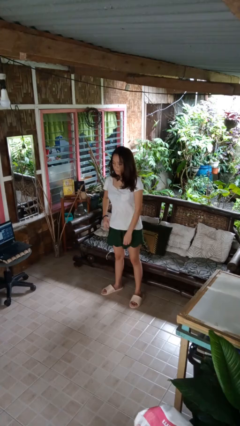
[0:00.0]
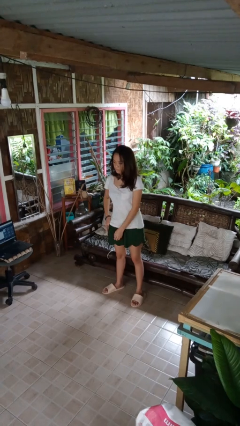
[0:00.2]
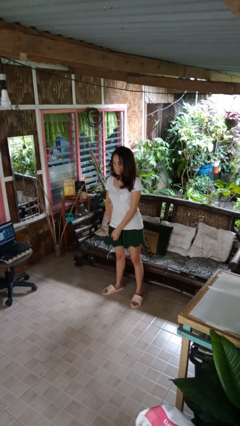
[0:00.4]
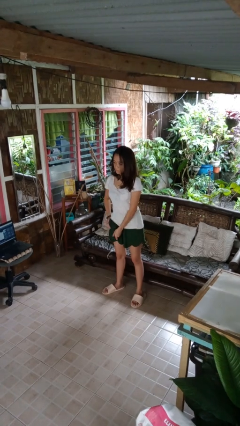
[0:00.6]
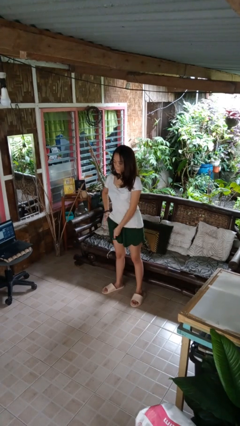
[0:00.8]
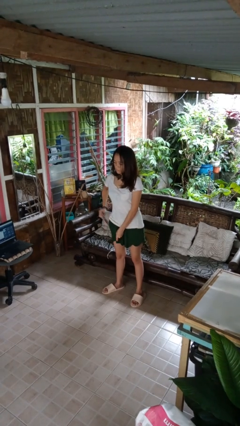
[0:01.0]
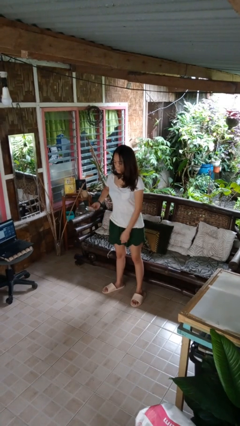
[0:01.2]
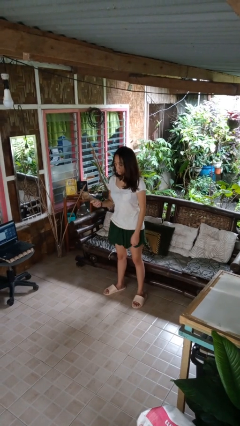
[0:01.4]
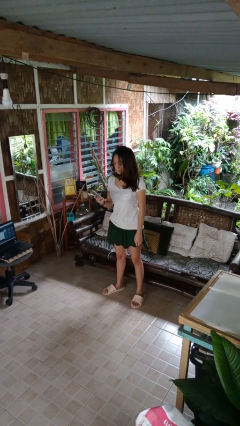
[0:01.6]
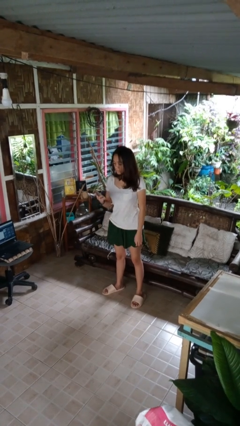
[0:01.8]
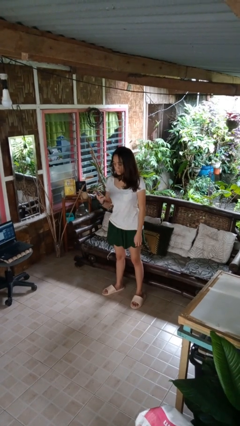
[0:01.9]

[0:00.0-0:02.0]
person takes phone from pocket

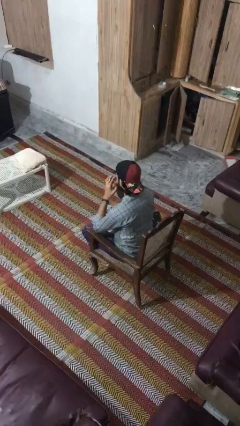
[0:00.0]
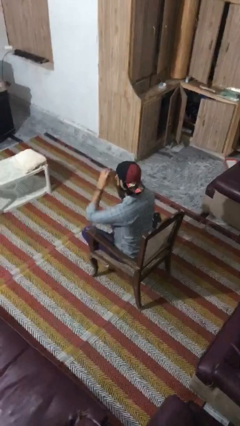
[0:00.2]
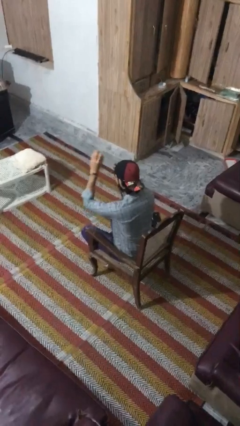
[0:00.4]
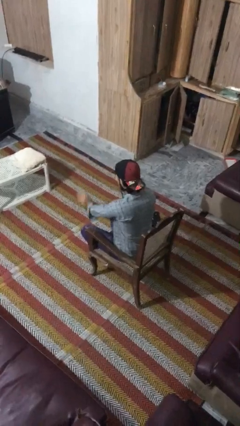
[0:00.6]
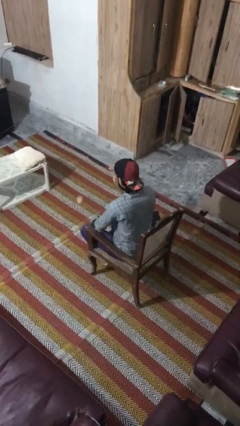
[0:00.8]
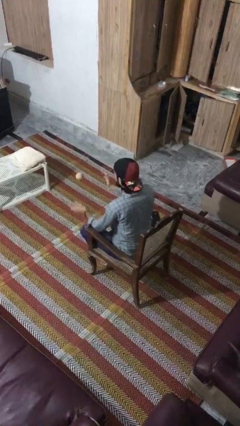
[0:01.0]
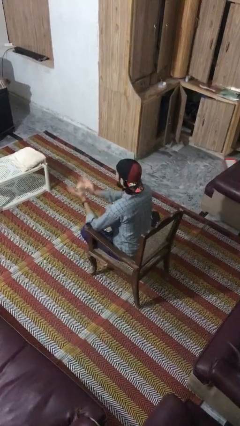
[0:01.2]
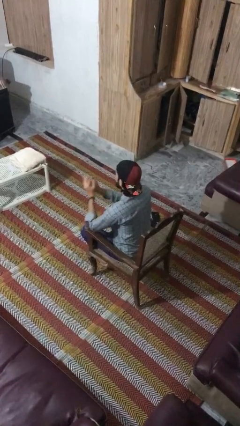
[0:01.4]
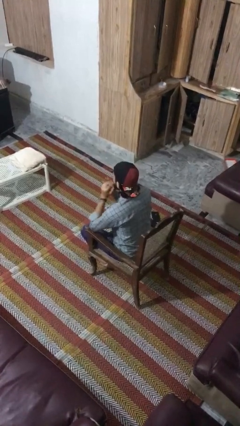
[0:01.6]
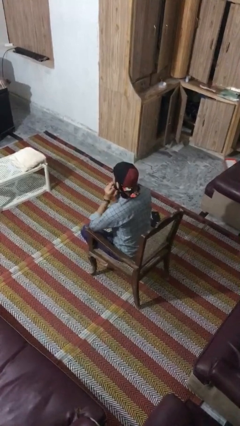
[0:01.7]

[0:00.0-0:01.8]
person bounces ball on floor

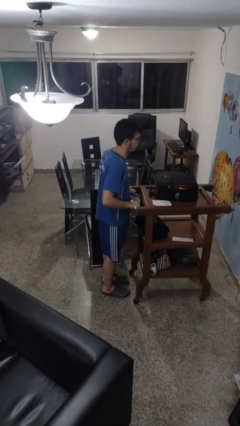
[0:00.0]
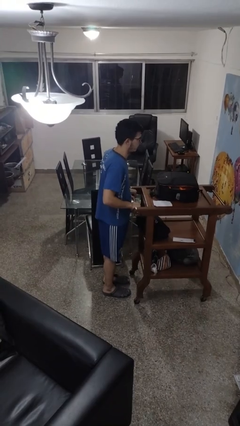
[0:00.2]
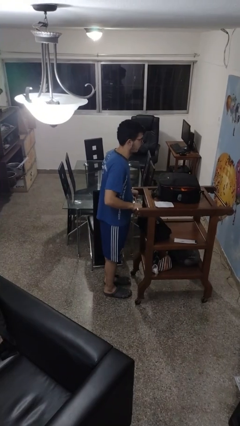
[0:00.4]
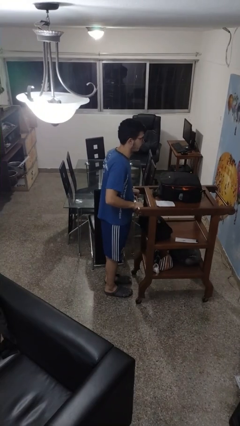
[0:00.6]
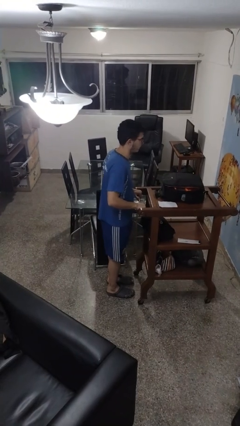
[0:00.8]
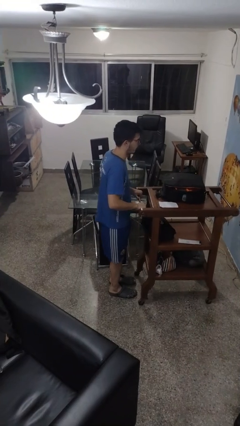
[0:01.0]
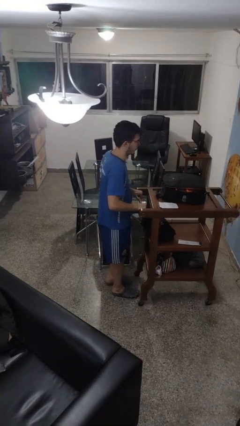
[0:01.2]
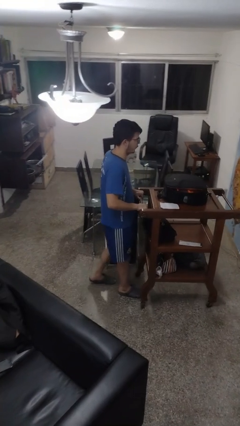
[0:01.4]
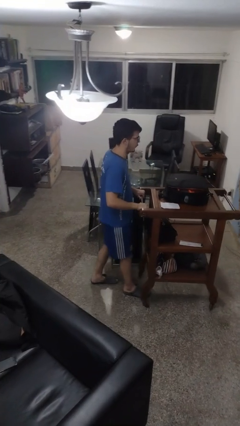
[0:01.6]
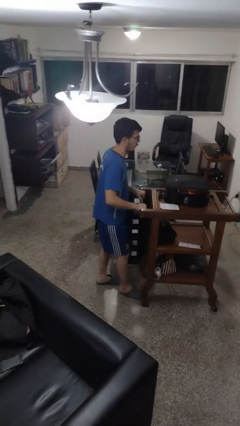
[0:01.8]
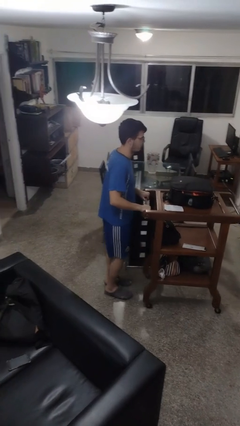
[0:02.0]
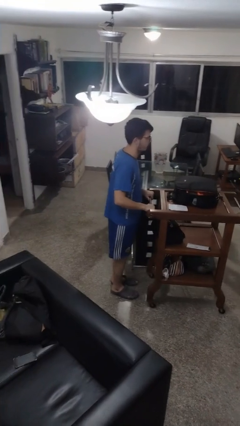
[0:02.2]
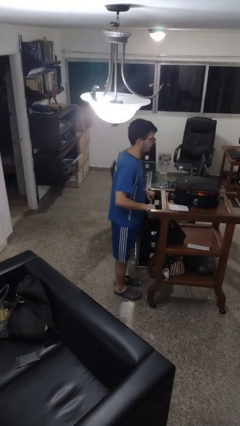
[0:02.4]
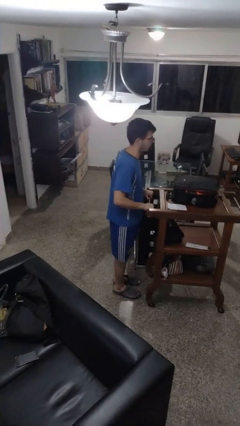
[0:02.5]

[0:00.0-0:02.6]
person pulls wheeled cart

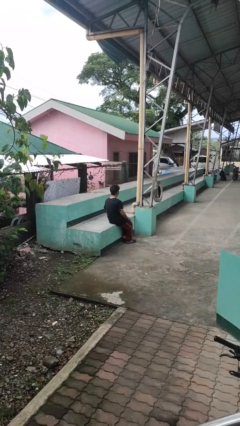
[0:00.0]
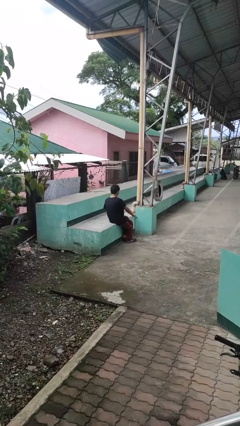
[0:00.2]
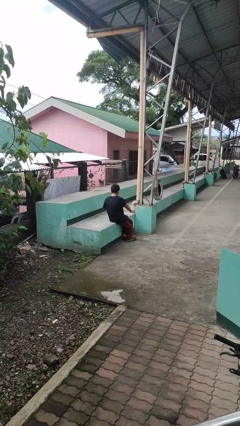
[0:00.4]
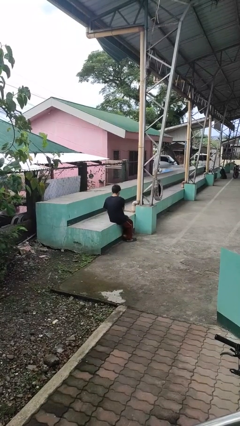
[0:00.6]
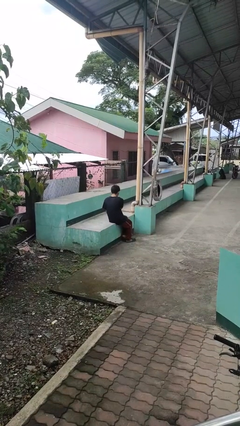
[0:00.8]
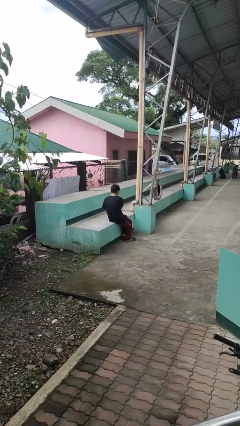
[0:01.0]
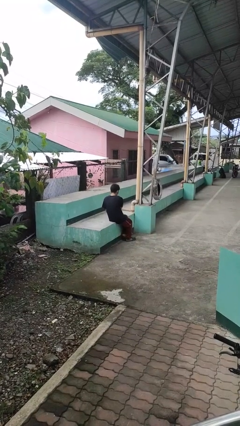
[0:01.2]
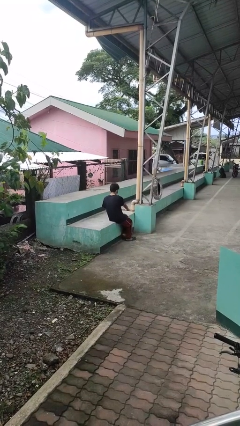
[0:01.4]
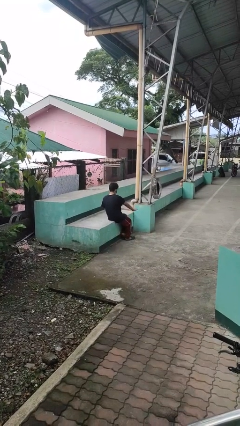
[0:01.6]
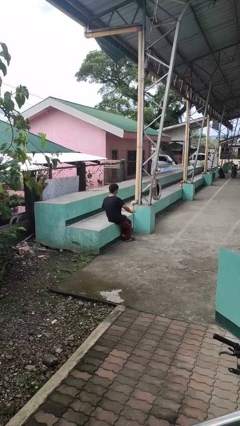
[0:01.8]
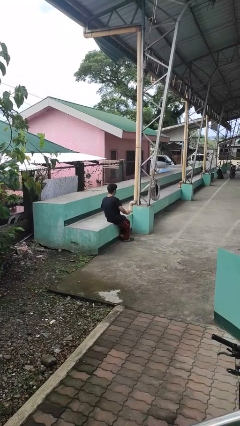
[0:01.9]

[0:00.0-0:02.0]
person waves hand over object

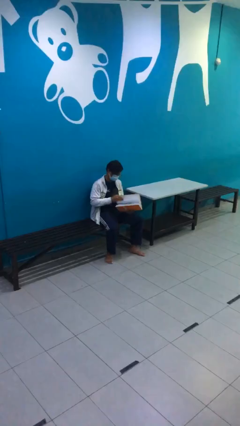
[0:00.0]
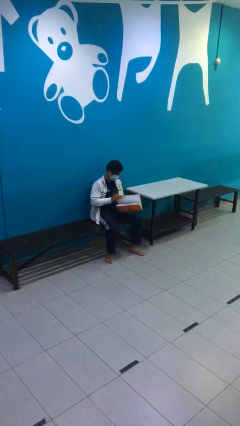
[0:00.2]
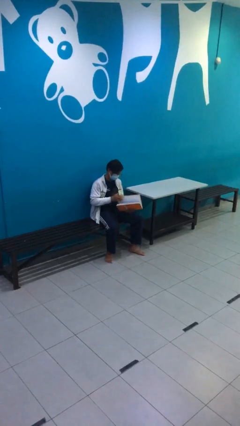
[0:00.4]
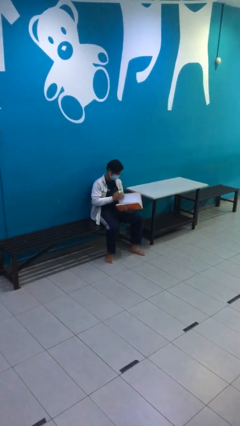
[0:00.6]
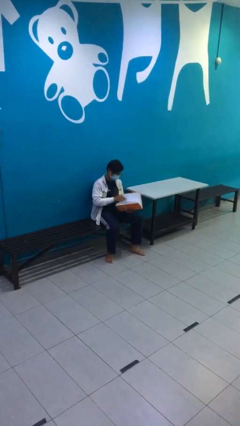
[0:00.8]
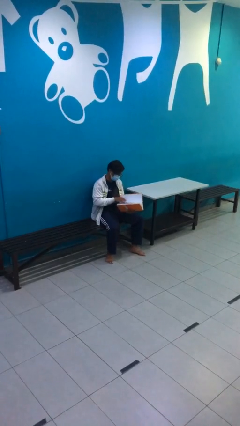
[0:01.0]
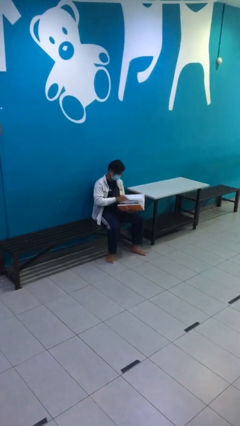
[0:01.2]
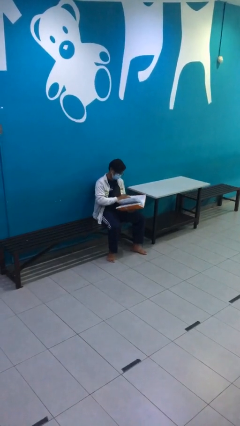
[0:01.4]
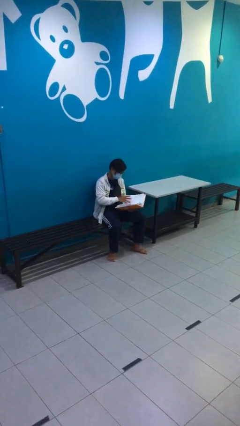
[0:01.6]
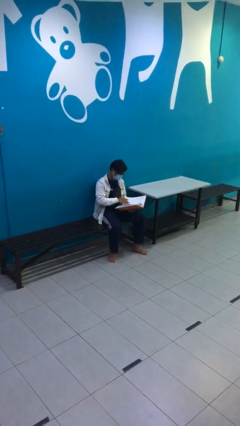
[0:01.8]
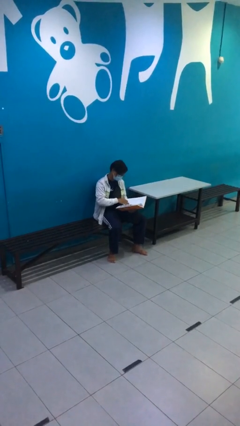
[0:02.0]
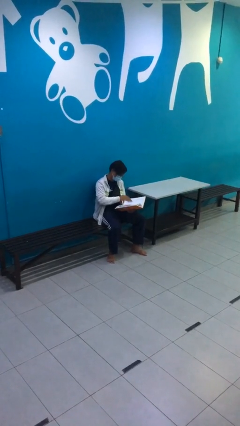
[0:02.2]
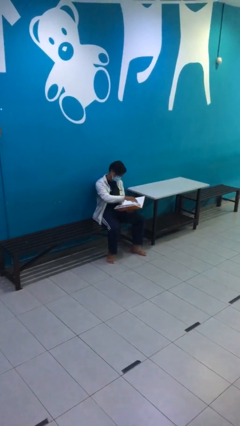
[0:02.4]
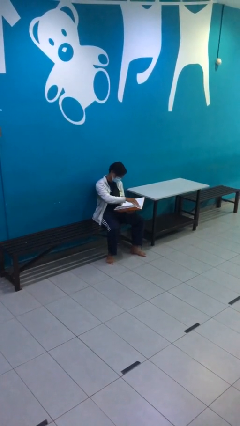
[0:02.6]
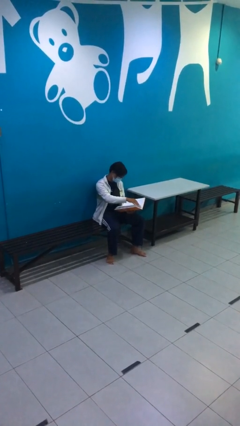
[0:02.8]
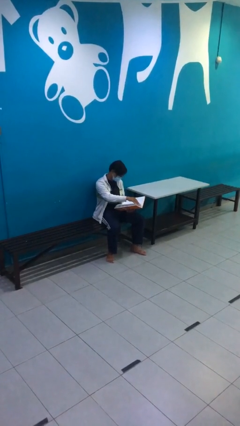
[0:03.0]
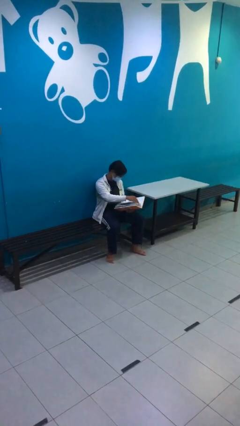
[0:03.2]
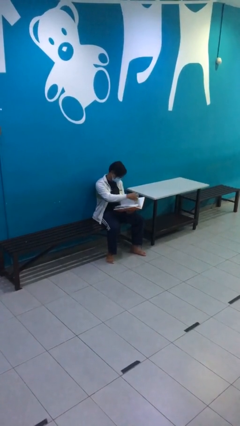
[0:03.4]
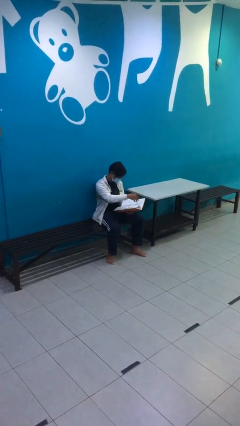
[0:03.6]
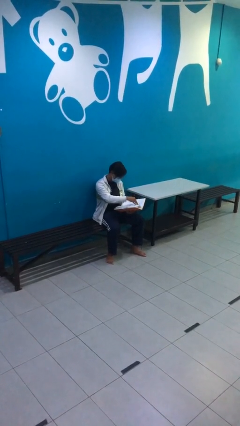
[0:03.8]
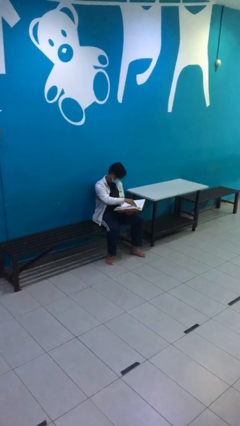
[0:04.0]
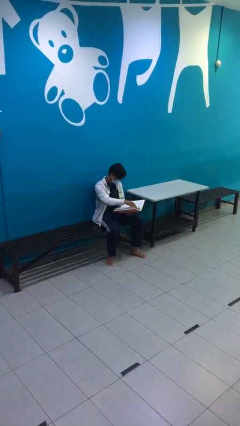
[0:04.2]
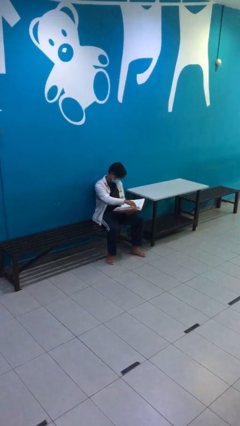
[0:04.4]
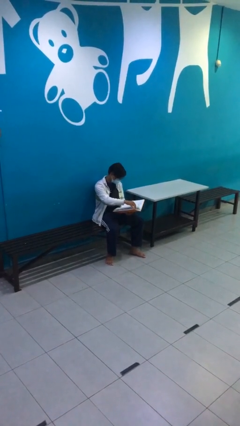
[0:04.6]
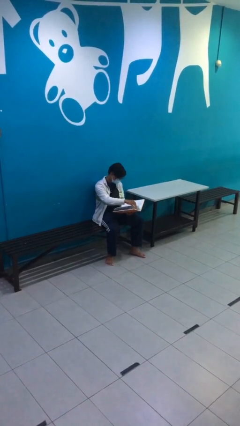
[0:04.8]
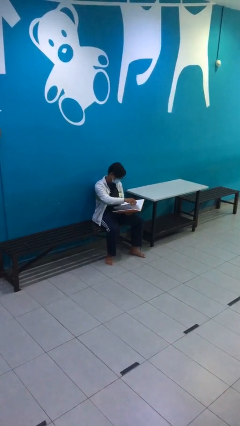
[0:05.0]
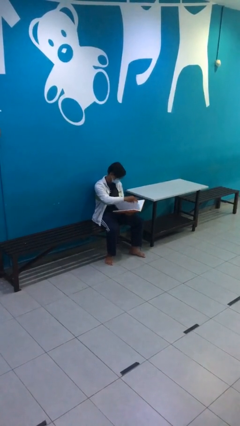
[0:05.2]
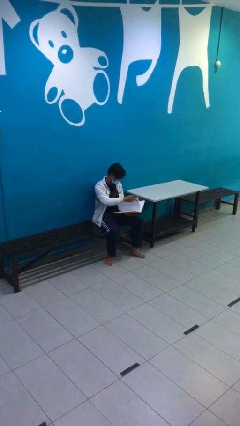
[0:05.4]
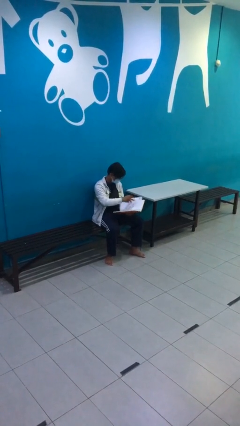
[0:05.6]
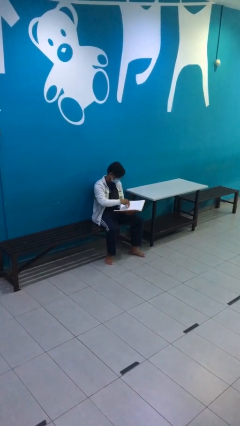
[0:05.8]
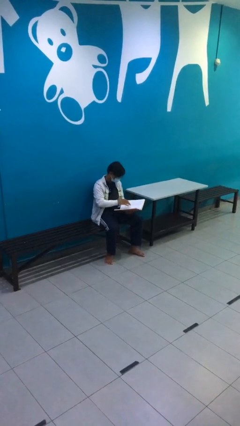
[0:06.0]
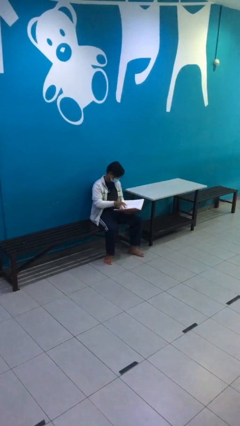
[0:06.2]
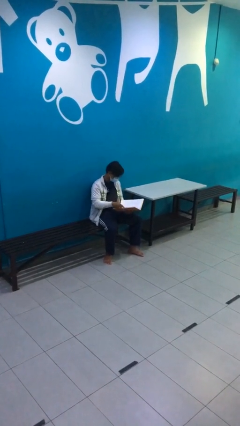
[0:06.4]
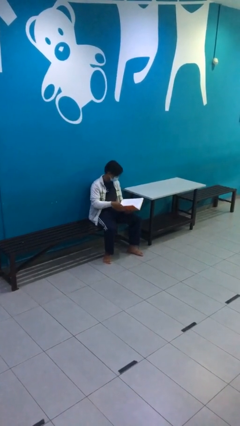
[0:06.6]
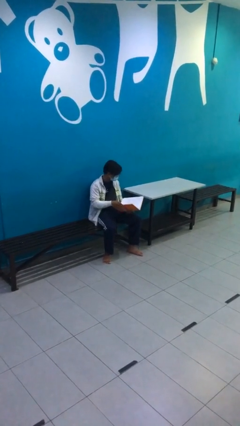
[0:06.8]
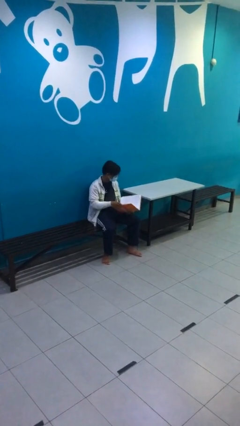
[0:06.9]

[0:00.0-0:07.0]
person reads document

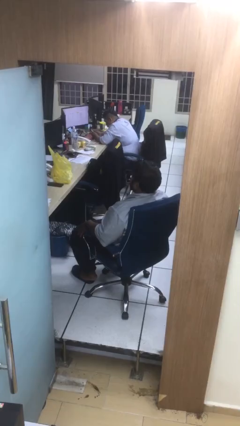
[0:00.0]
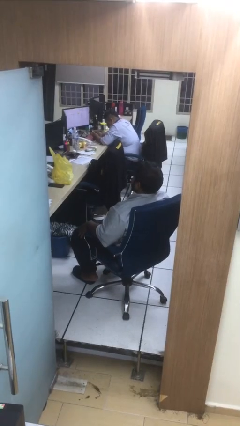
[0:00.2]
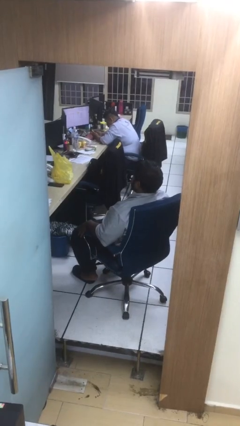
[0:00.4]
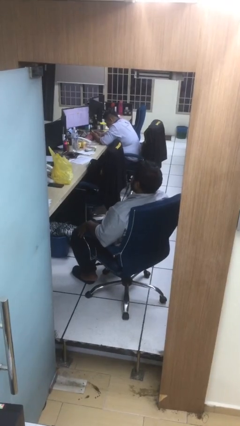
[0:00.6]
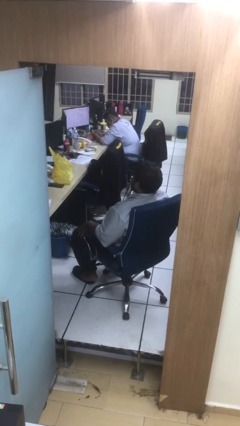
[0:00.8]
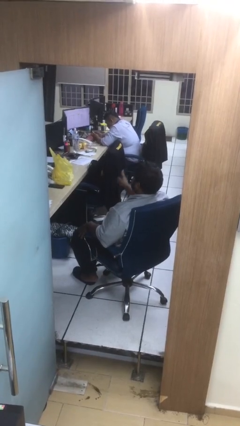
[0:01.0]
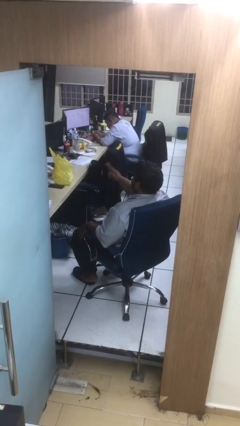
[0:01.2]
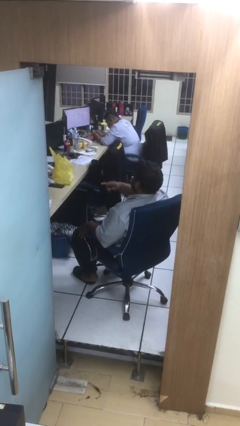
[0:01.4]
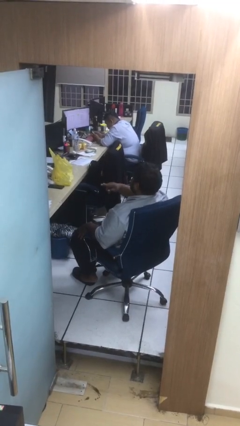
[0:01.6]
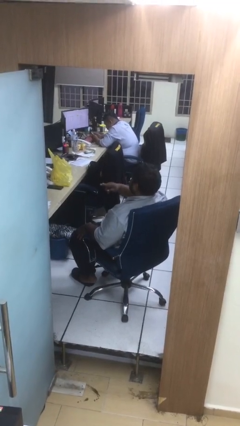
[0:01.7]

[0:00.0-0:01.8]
person gestures swipe left
